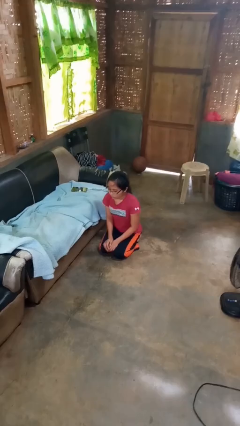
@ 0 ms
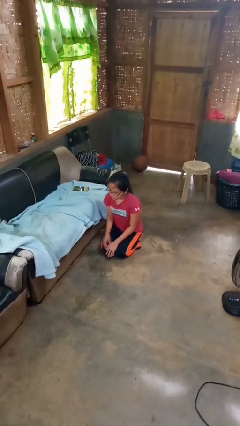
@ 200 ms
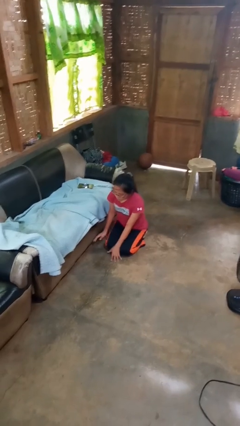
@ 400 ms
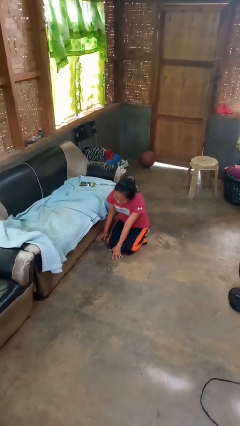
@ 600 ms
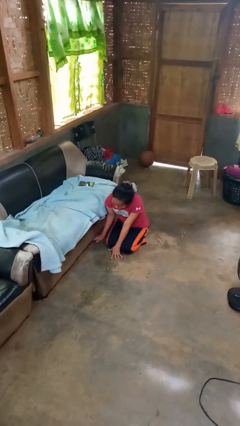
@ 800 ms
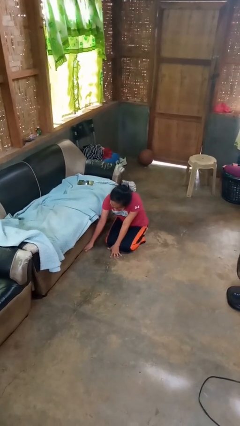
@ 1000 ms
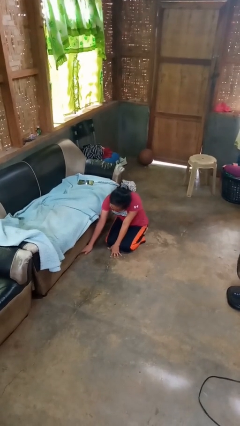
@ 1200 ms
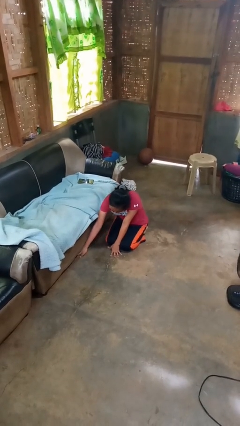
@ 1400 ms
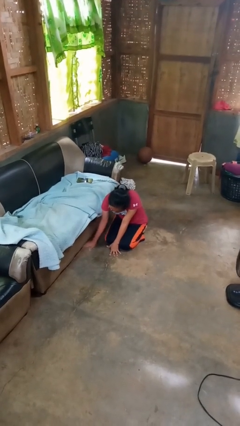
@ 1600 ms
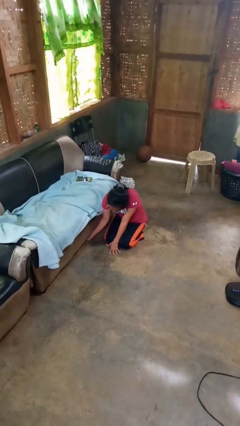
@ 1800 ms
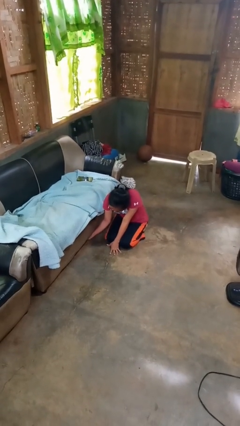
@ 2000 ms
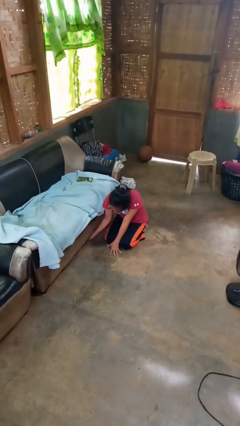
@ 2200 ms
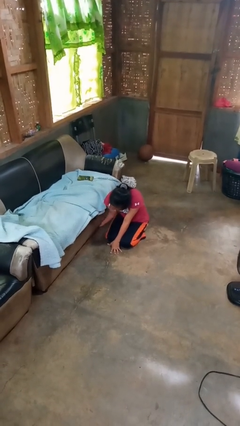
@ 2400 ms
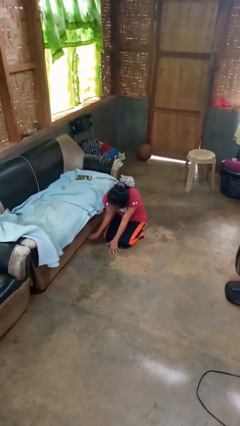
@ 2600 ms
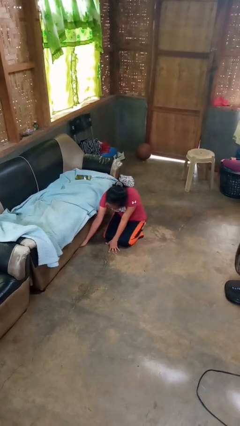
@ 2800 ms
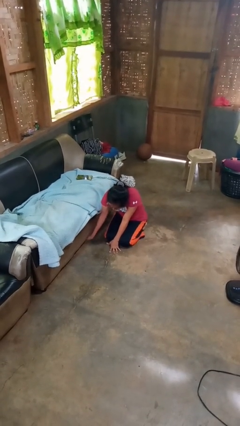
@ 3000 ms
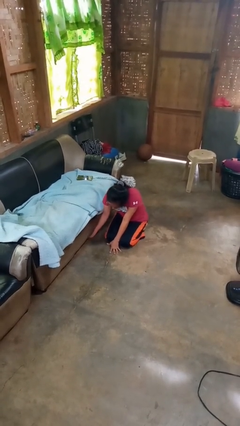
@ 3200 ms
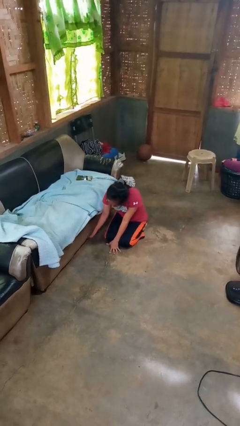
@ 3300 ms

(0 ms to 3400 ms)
person searches under couch

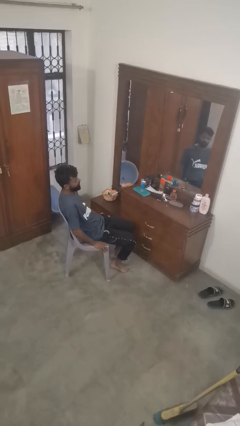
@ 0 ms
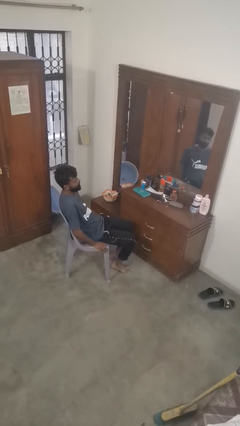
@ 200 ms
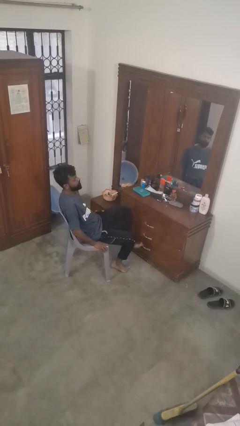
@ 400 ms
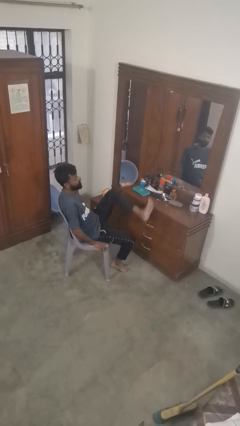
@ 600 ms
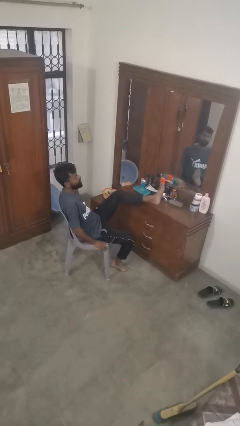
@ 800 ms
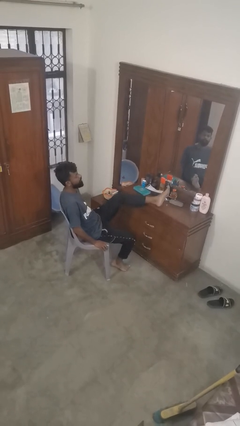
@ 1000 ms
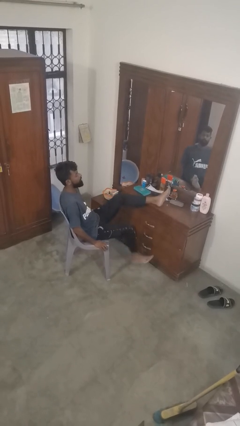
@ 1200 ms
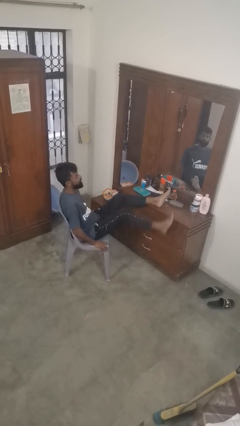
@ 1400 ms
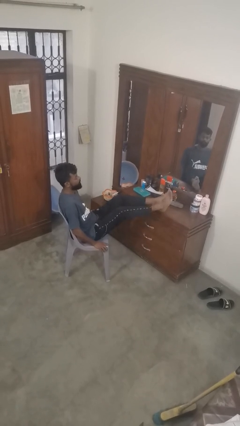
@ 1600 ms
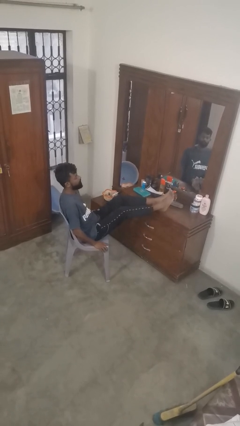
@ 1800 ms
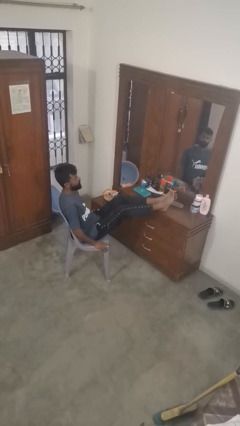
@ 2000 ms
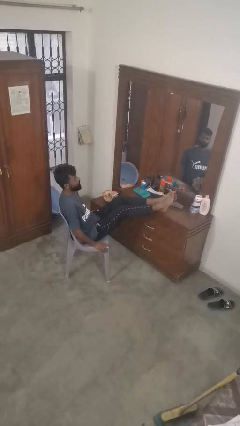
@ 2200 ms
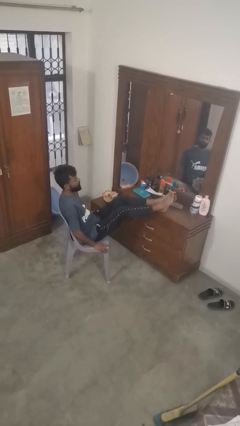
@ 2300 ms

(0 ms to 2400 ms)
person puts feet up

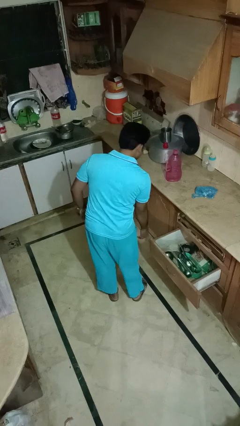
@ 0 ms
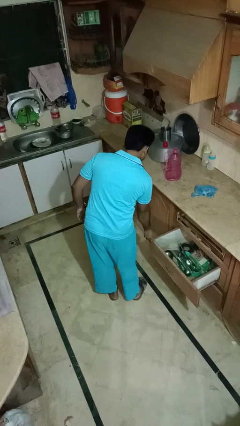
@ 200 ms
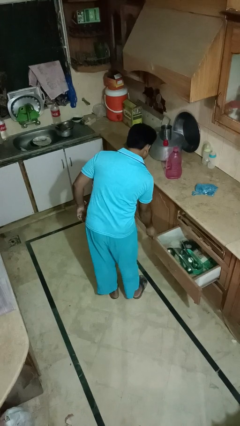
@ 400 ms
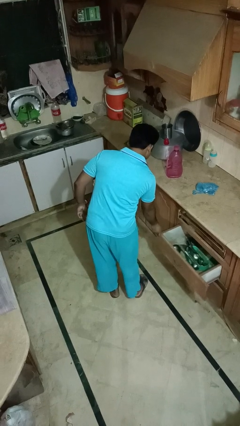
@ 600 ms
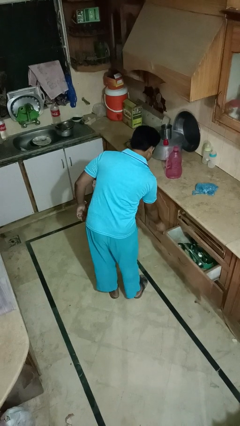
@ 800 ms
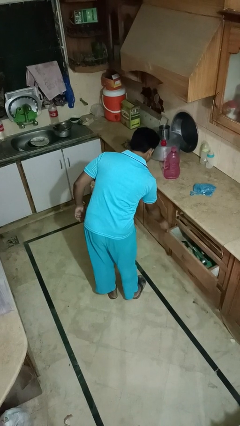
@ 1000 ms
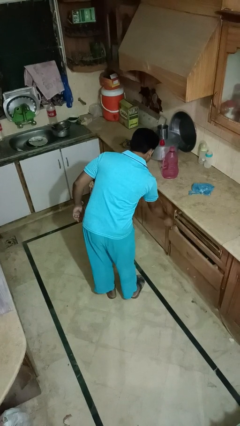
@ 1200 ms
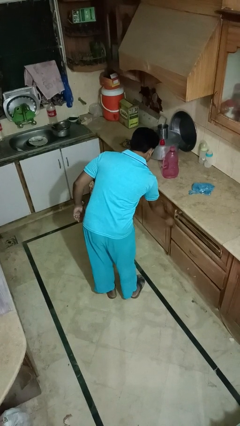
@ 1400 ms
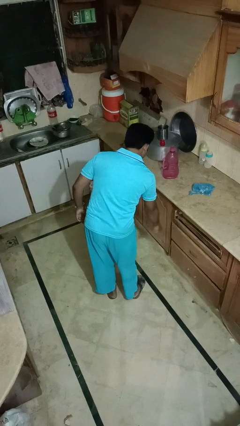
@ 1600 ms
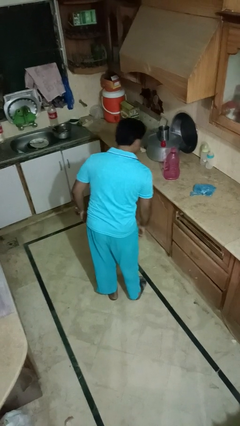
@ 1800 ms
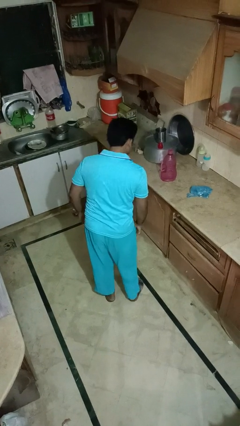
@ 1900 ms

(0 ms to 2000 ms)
person closes kitchen drawer

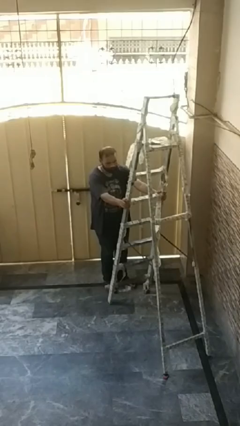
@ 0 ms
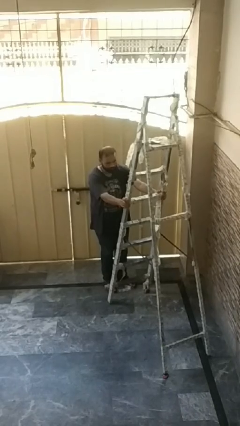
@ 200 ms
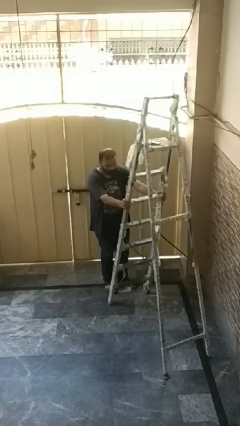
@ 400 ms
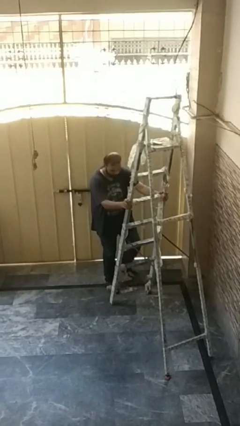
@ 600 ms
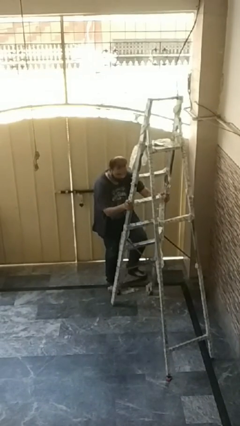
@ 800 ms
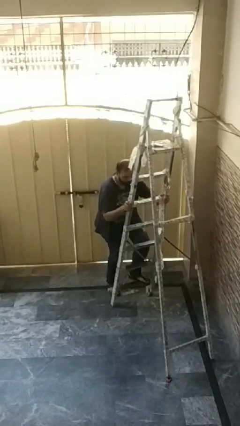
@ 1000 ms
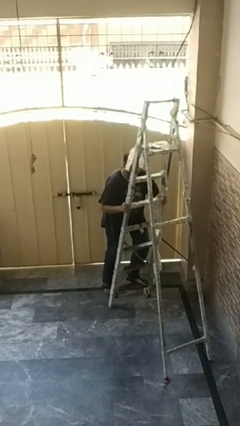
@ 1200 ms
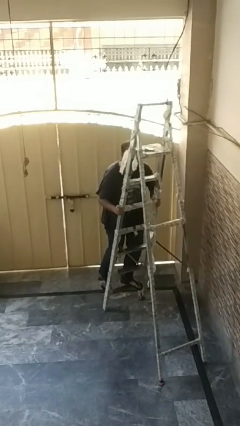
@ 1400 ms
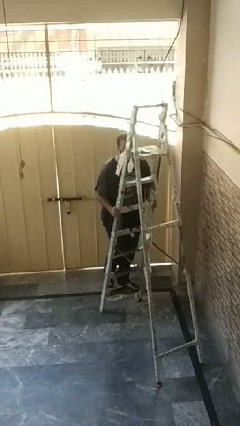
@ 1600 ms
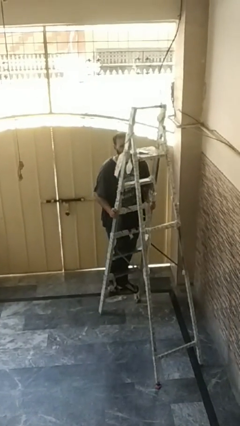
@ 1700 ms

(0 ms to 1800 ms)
person climbs up ladder

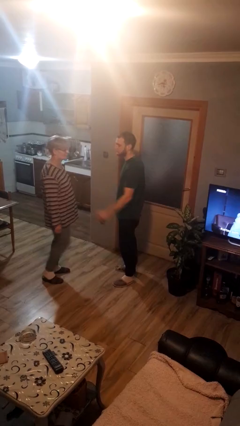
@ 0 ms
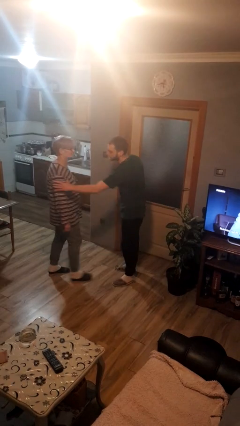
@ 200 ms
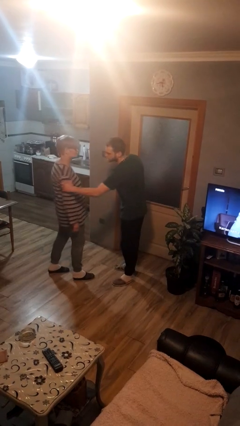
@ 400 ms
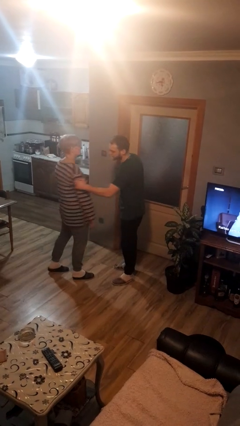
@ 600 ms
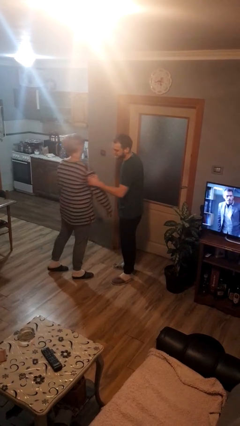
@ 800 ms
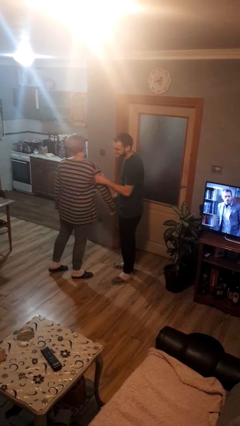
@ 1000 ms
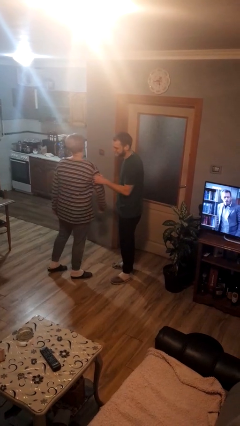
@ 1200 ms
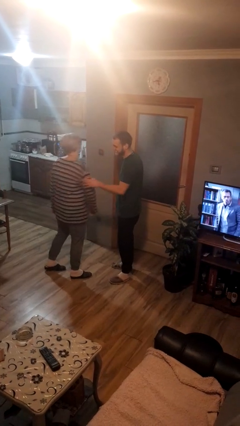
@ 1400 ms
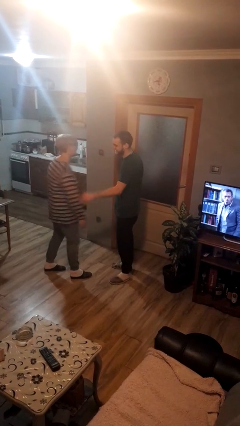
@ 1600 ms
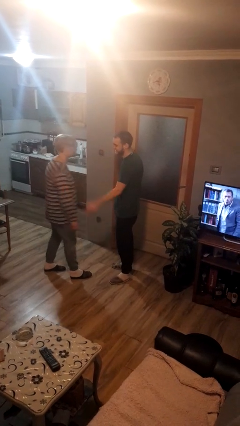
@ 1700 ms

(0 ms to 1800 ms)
person grabs person by bicep

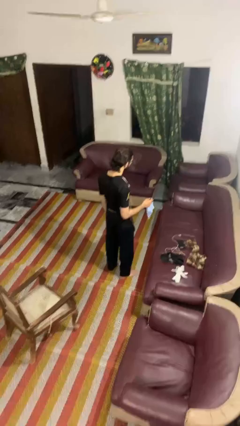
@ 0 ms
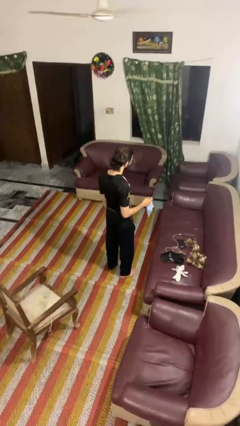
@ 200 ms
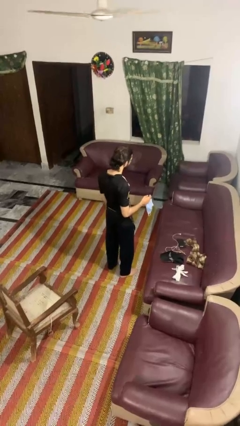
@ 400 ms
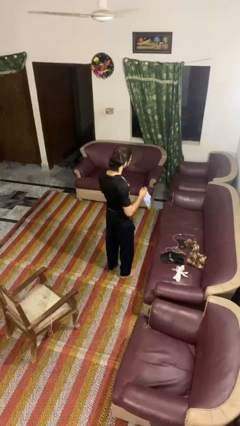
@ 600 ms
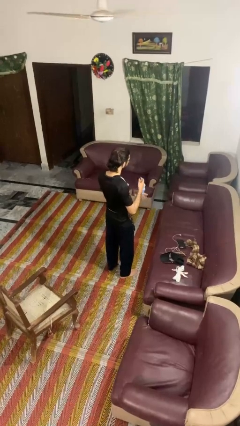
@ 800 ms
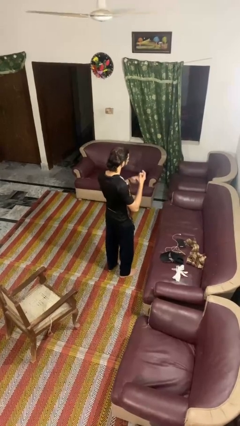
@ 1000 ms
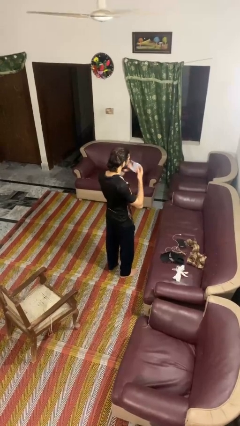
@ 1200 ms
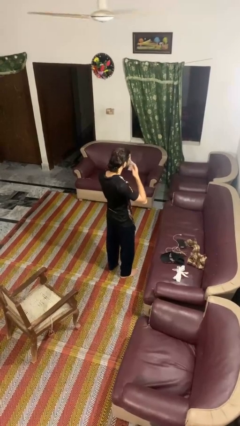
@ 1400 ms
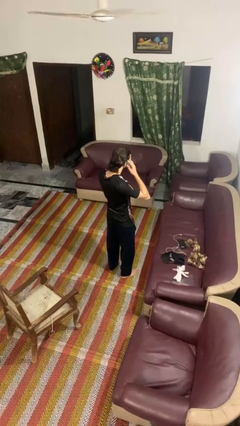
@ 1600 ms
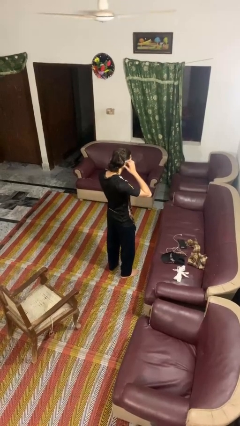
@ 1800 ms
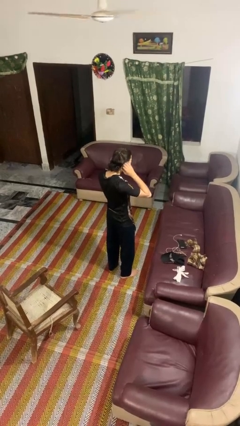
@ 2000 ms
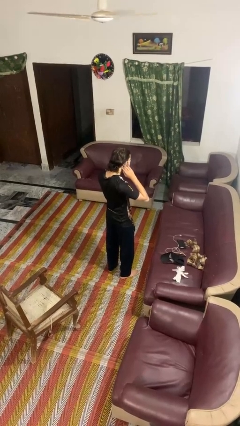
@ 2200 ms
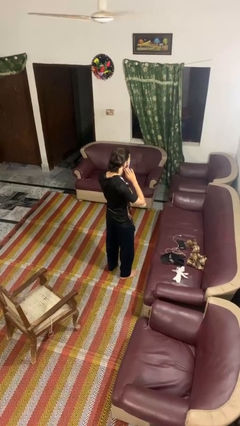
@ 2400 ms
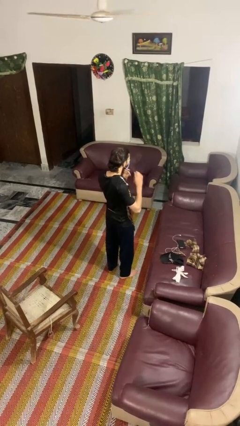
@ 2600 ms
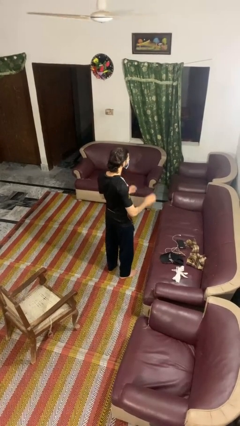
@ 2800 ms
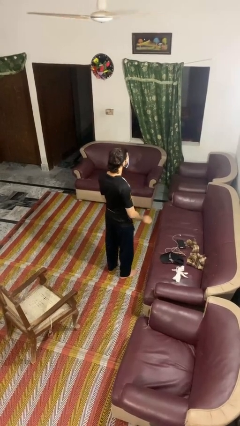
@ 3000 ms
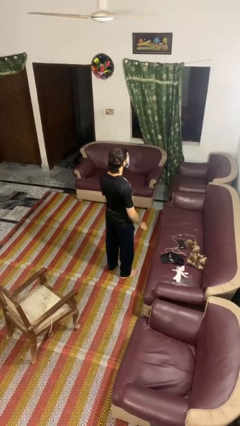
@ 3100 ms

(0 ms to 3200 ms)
person puts on facemask

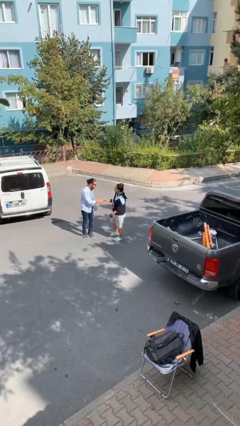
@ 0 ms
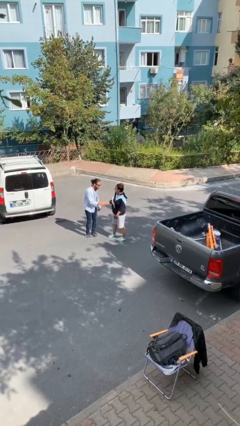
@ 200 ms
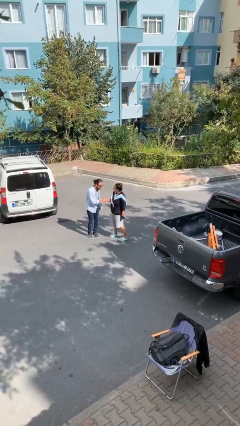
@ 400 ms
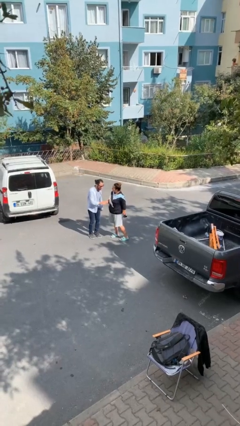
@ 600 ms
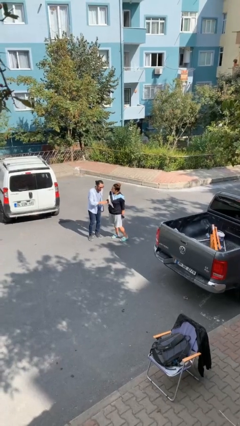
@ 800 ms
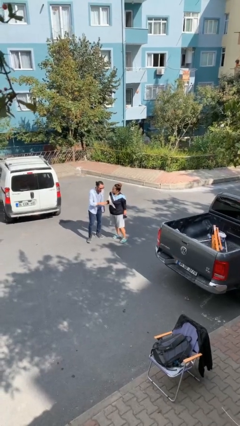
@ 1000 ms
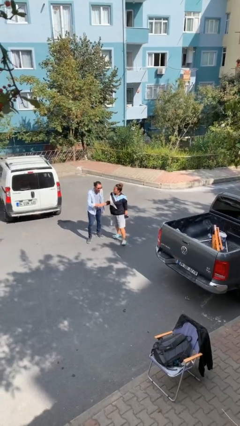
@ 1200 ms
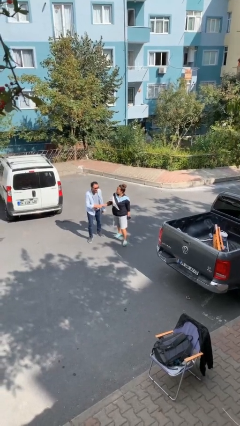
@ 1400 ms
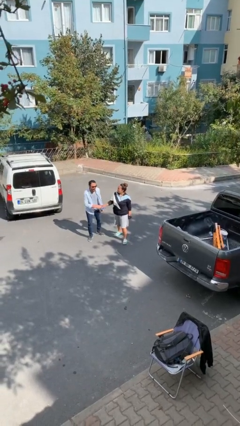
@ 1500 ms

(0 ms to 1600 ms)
person shakes hand

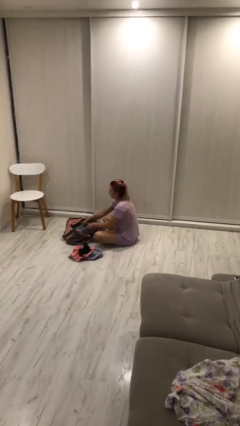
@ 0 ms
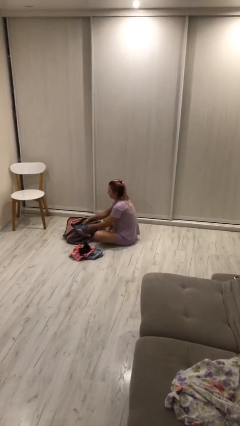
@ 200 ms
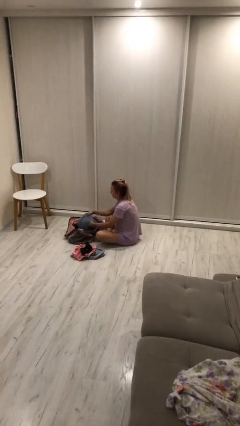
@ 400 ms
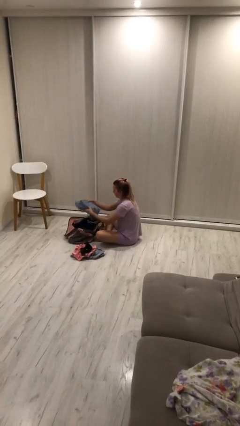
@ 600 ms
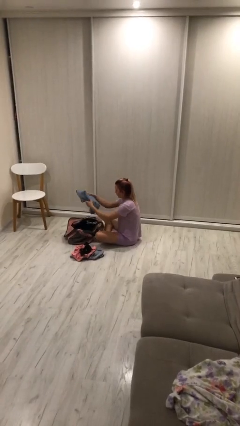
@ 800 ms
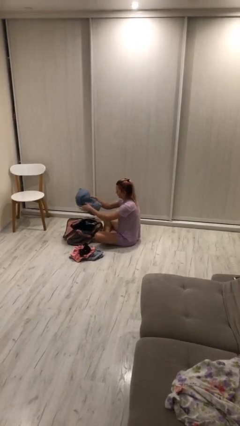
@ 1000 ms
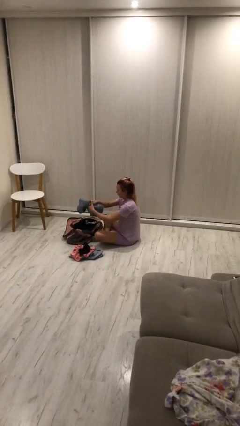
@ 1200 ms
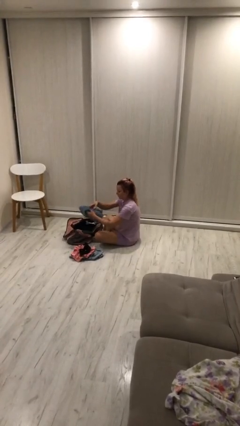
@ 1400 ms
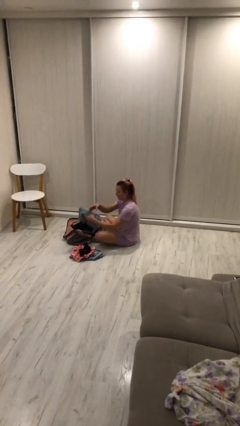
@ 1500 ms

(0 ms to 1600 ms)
person unloads clothes from suitcase
